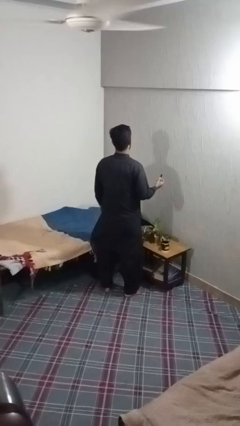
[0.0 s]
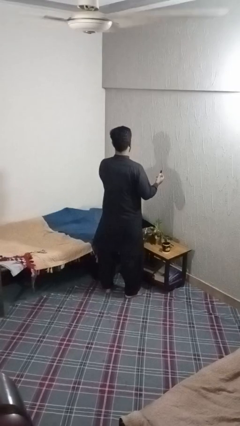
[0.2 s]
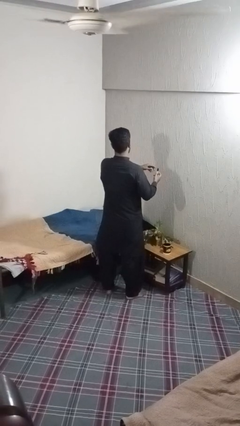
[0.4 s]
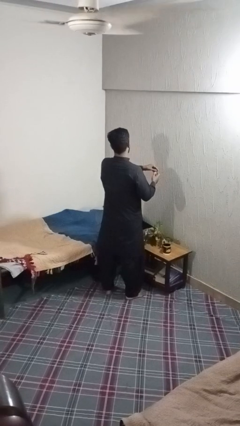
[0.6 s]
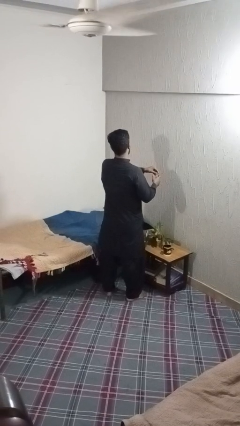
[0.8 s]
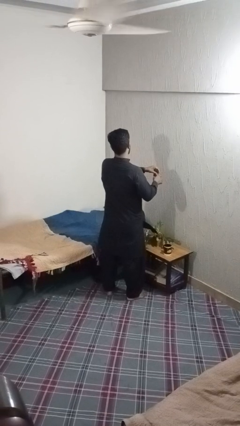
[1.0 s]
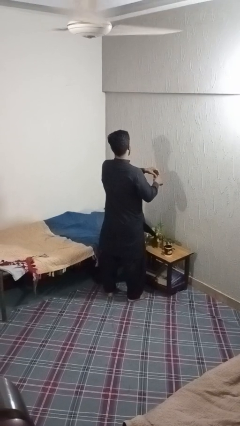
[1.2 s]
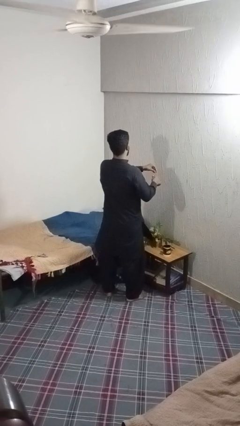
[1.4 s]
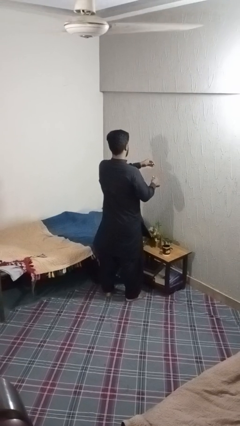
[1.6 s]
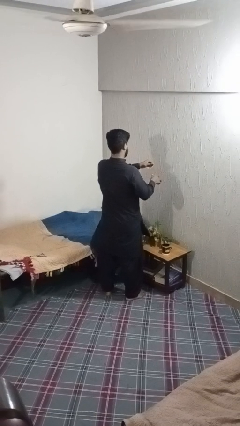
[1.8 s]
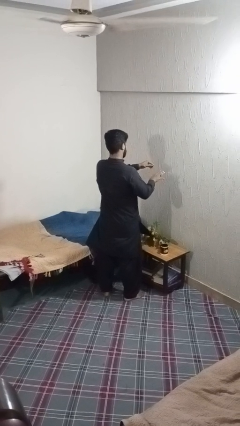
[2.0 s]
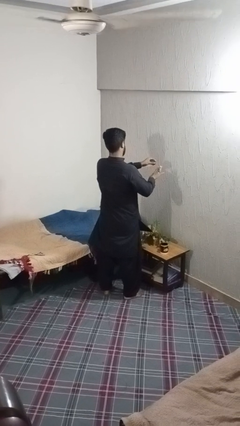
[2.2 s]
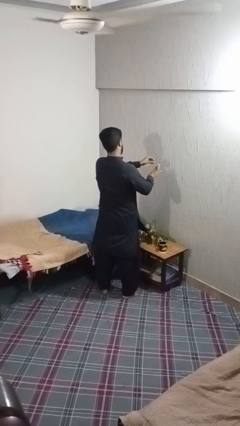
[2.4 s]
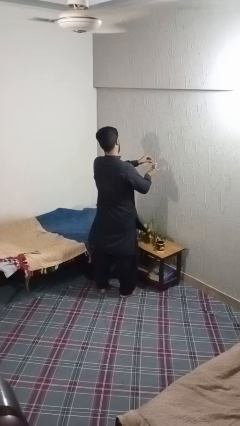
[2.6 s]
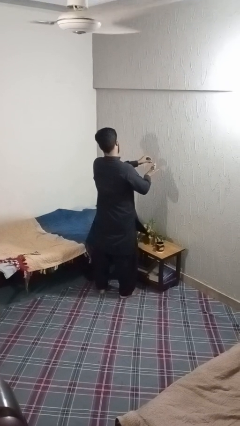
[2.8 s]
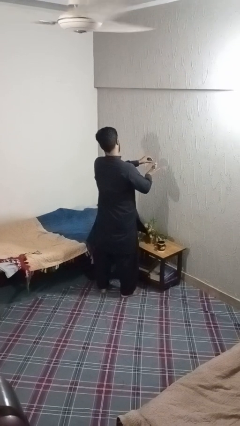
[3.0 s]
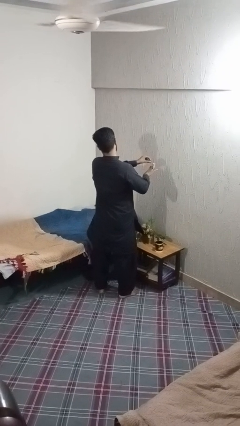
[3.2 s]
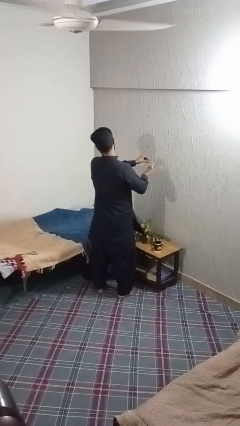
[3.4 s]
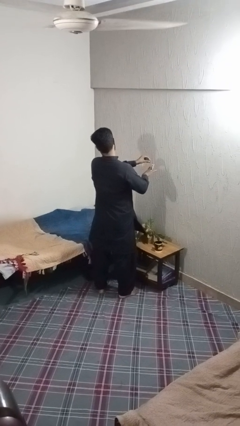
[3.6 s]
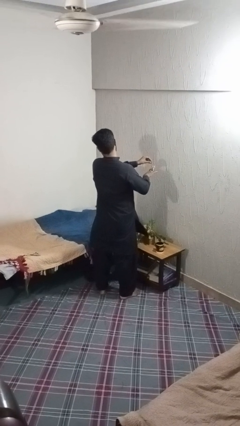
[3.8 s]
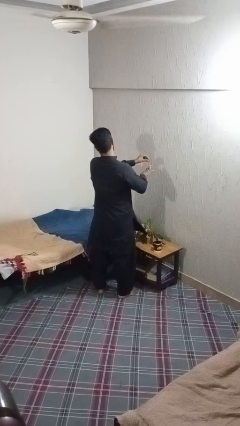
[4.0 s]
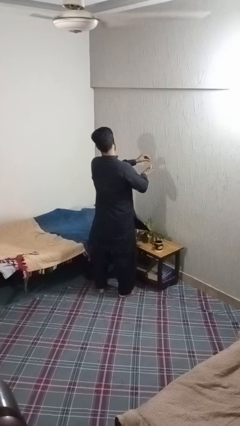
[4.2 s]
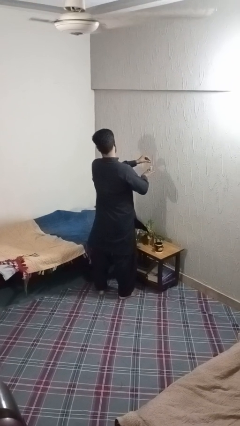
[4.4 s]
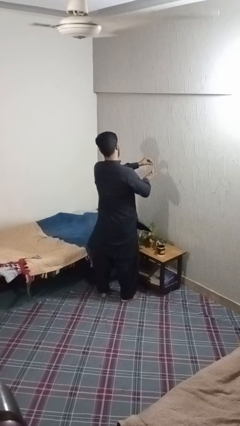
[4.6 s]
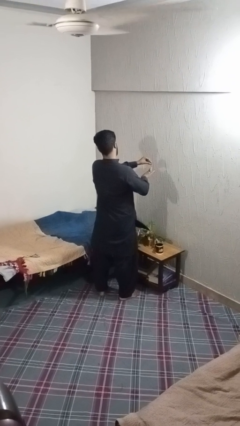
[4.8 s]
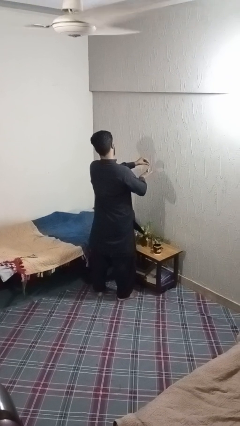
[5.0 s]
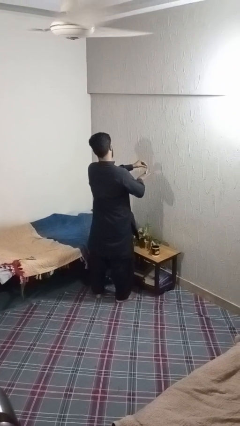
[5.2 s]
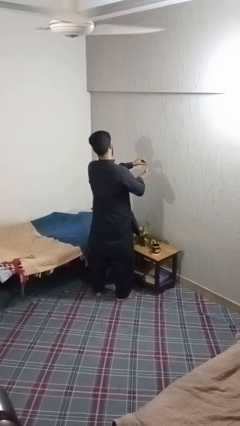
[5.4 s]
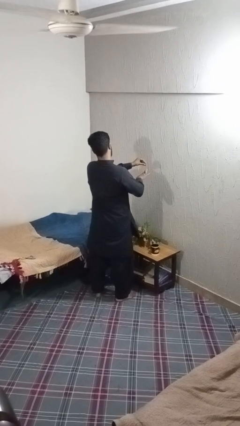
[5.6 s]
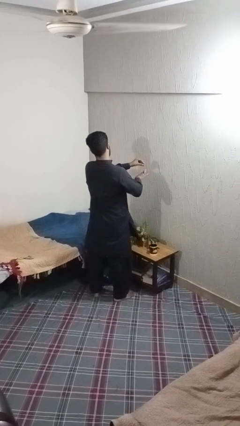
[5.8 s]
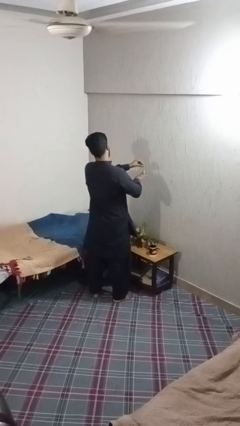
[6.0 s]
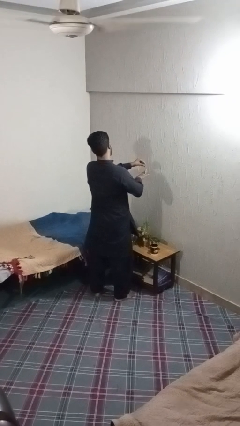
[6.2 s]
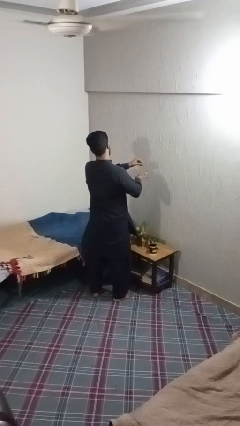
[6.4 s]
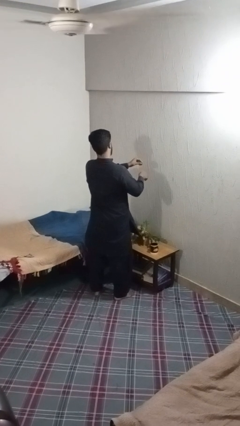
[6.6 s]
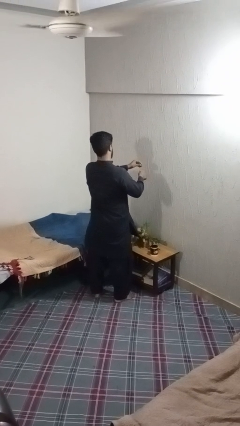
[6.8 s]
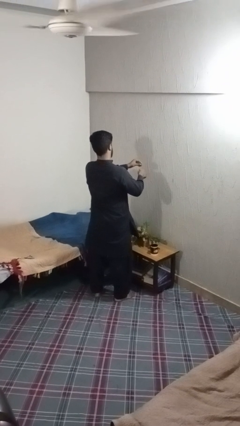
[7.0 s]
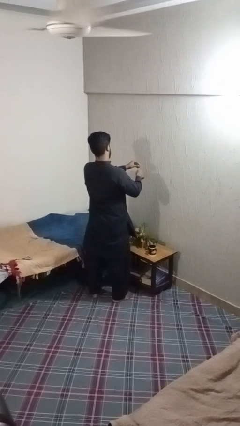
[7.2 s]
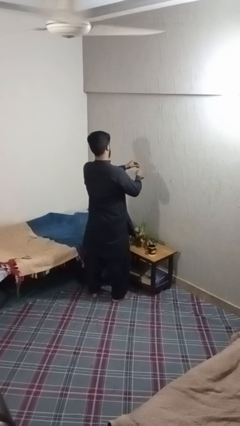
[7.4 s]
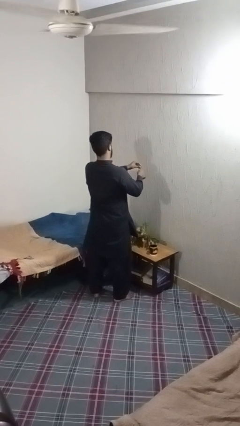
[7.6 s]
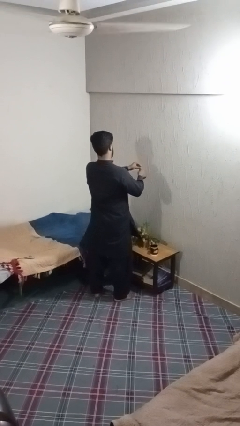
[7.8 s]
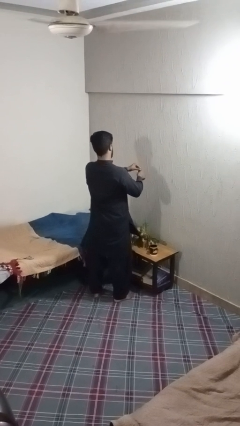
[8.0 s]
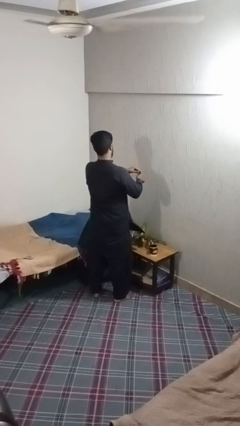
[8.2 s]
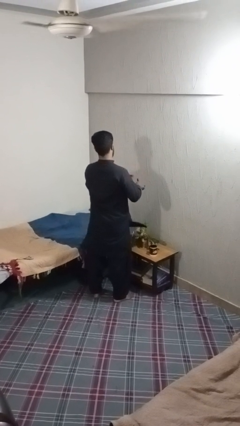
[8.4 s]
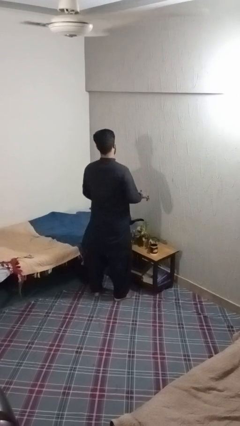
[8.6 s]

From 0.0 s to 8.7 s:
person paints fingernails

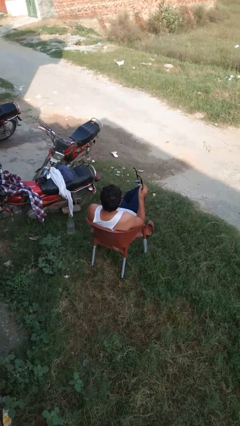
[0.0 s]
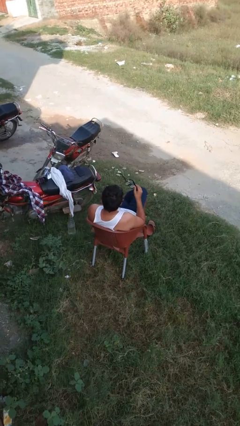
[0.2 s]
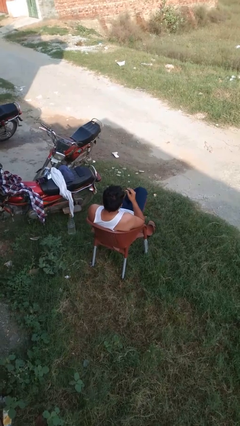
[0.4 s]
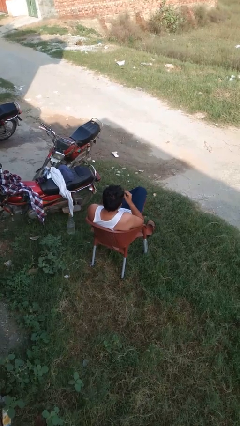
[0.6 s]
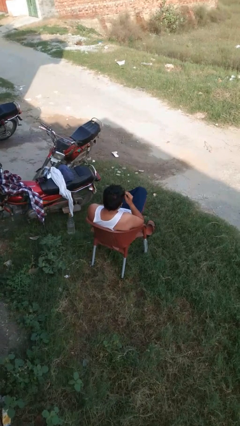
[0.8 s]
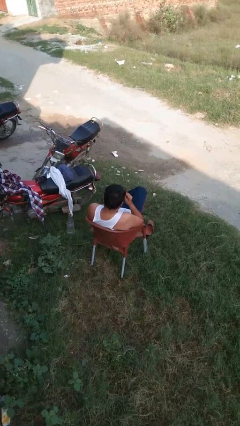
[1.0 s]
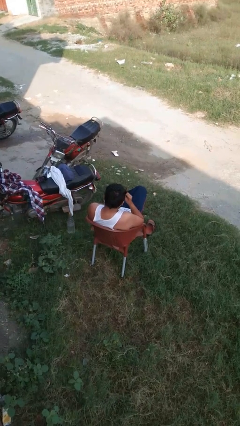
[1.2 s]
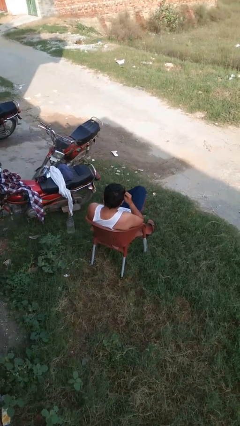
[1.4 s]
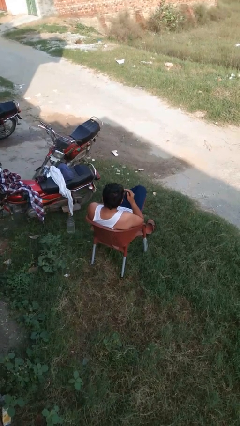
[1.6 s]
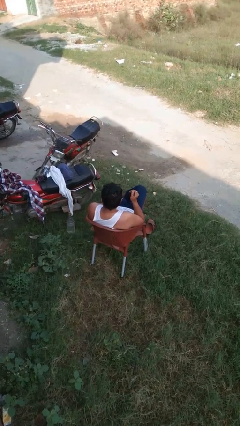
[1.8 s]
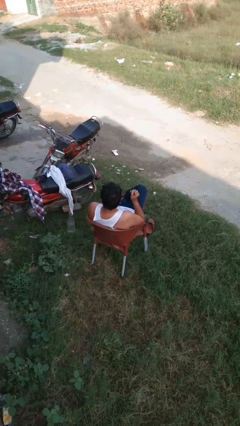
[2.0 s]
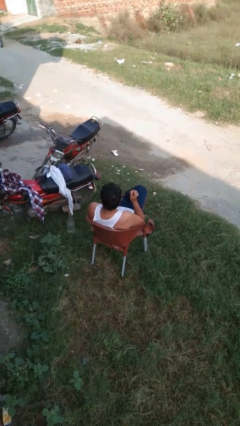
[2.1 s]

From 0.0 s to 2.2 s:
person puts on glasses

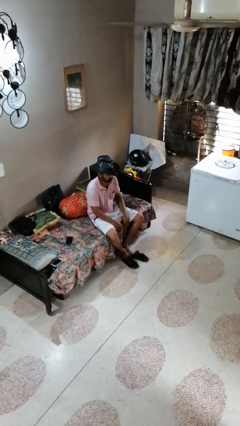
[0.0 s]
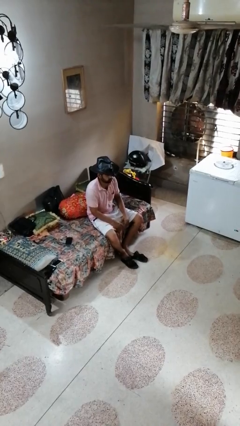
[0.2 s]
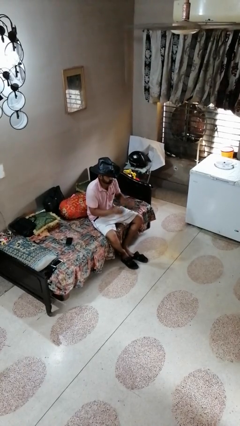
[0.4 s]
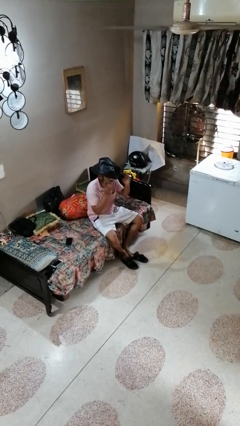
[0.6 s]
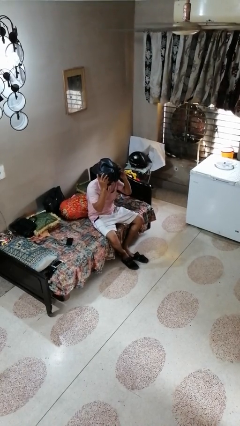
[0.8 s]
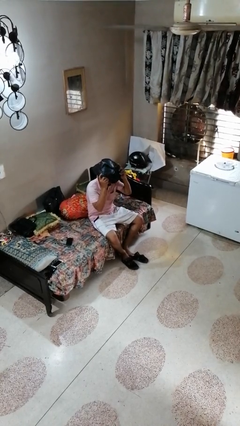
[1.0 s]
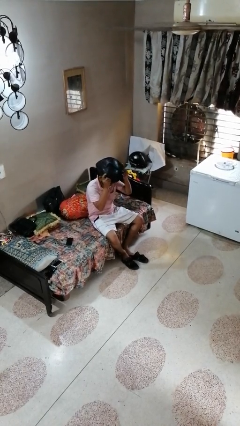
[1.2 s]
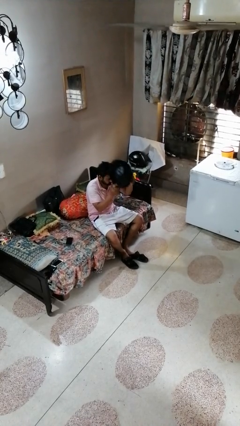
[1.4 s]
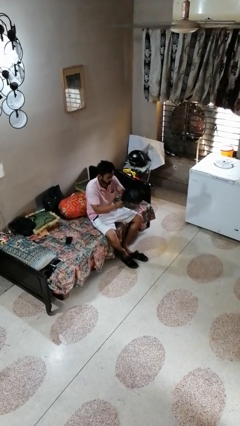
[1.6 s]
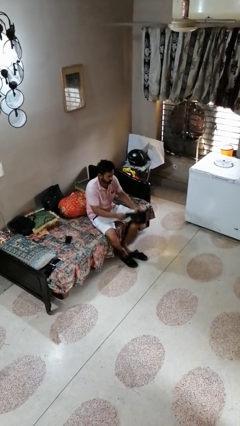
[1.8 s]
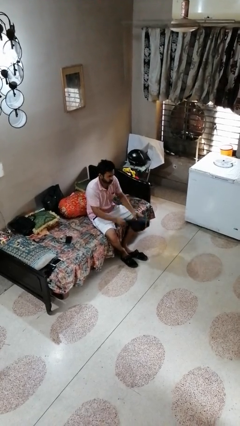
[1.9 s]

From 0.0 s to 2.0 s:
person takes off hat

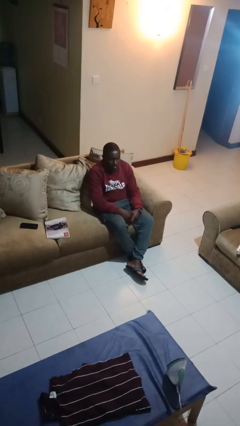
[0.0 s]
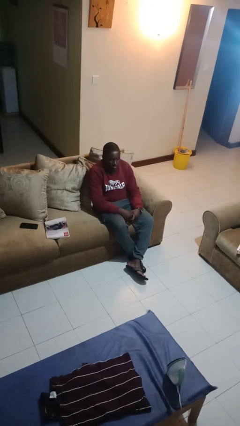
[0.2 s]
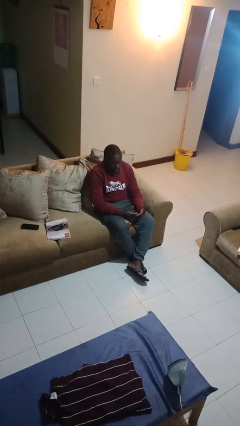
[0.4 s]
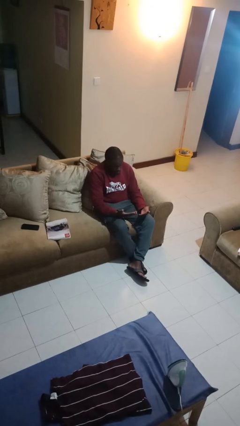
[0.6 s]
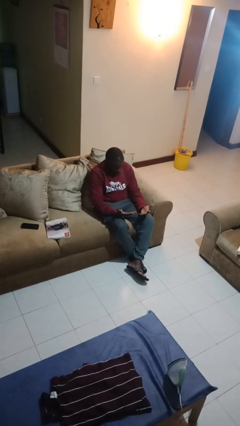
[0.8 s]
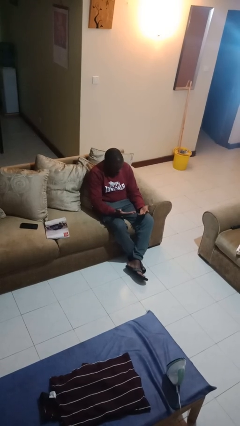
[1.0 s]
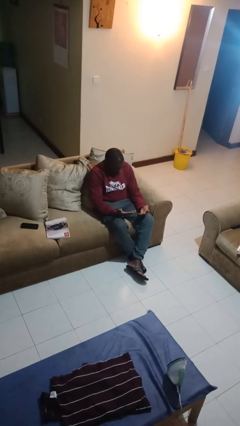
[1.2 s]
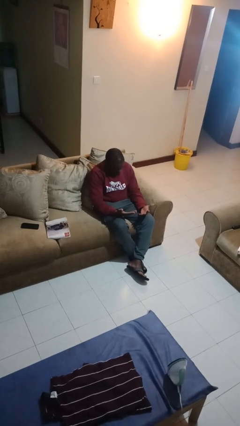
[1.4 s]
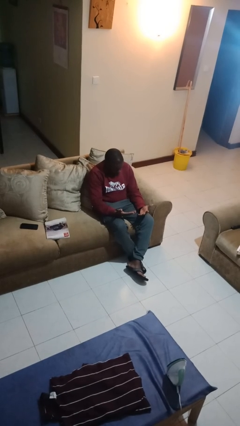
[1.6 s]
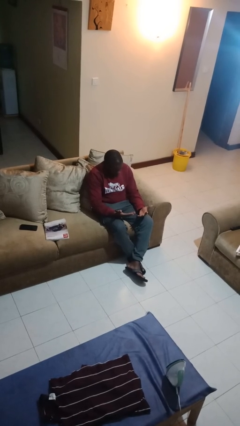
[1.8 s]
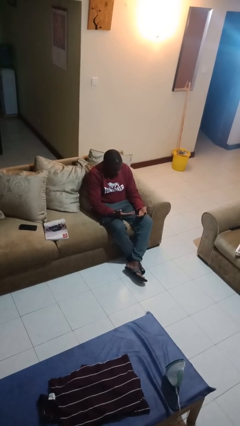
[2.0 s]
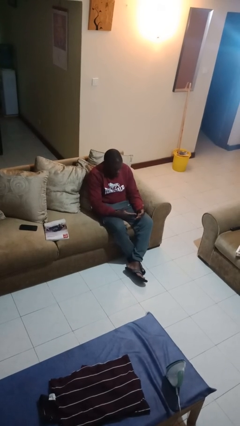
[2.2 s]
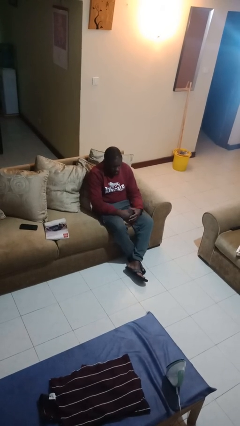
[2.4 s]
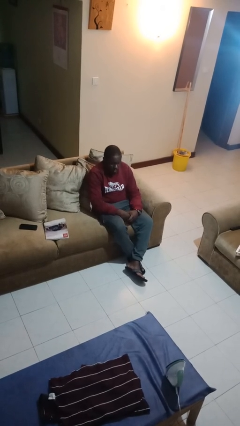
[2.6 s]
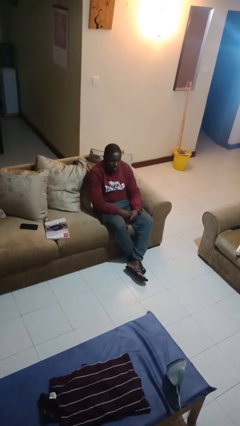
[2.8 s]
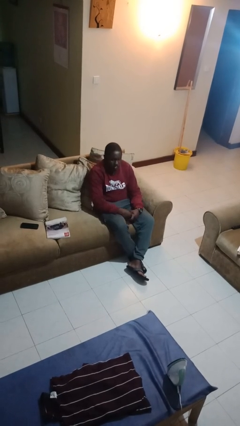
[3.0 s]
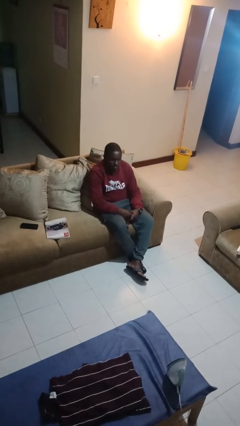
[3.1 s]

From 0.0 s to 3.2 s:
person looks at hands in lap

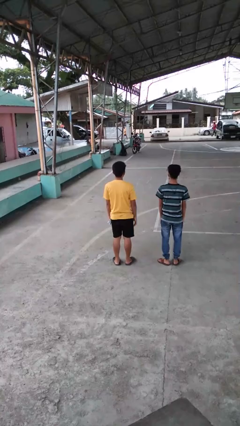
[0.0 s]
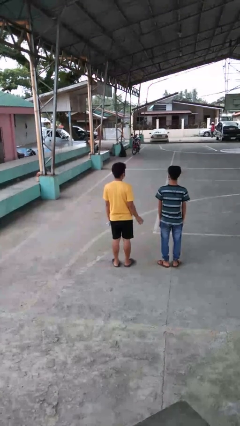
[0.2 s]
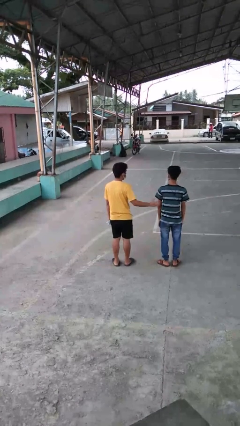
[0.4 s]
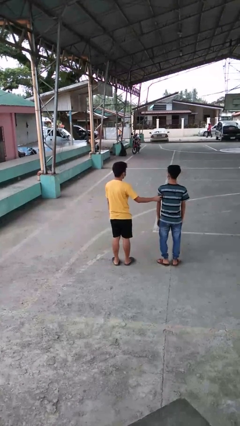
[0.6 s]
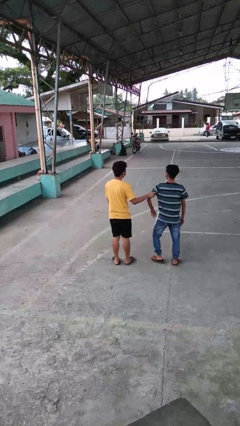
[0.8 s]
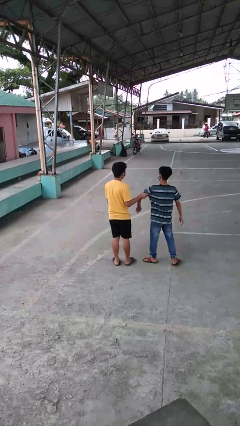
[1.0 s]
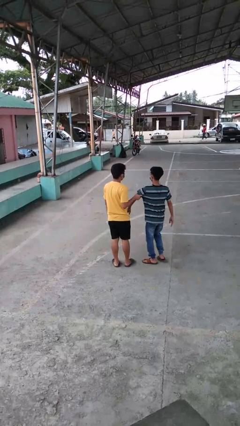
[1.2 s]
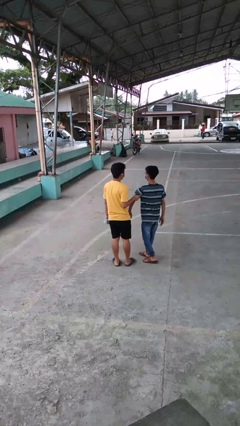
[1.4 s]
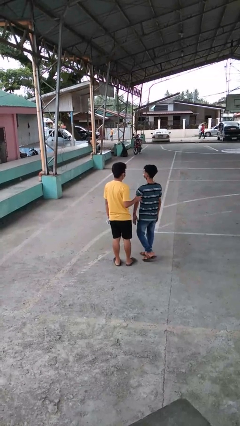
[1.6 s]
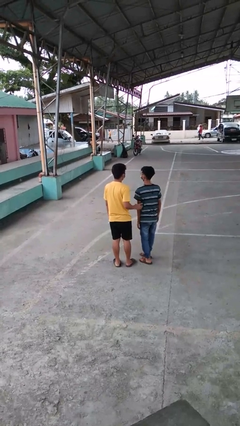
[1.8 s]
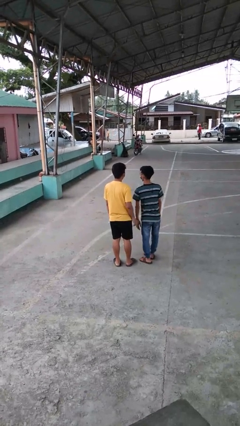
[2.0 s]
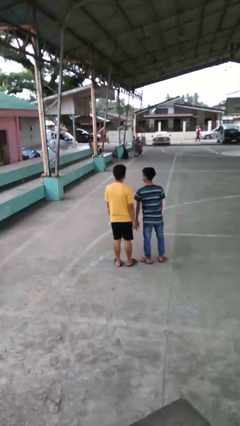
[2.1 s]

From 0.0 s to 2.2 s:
person grabs person by bicep
